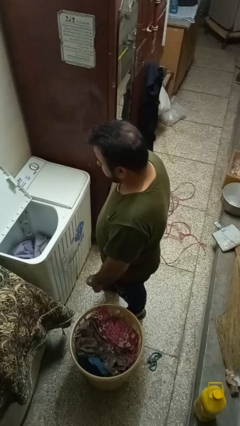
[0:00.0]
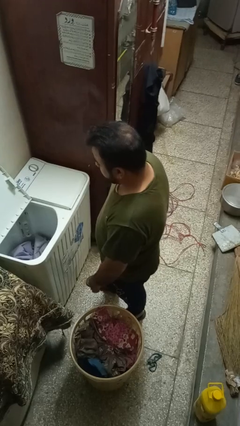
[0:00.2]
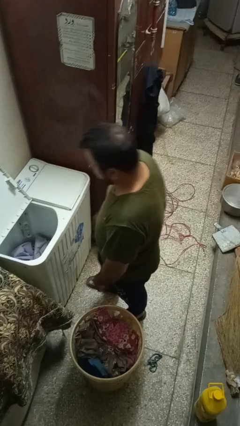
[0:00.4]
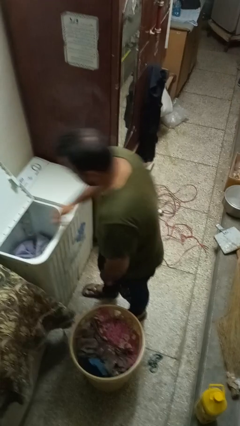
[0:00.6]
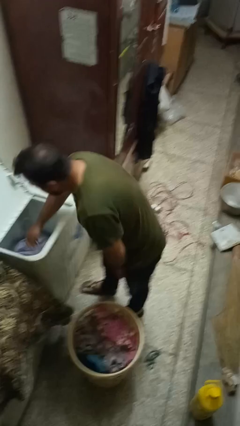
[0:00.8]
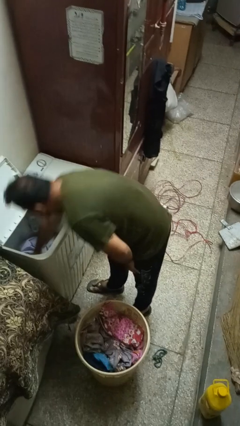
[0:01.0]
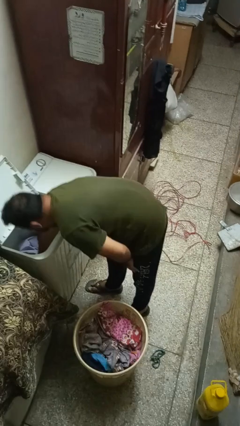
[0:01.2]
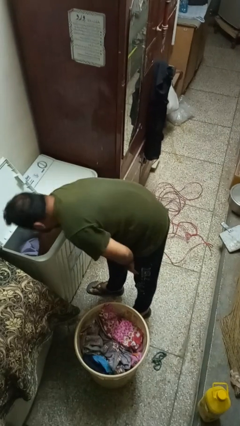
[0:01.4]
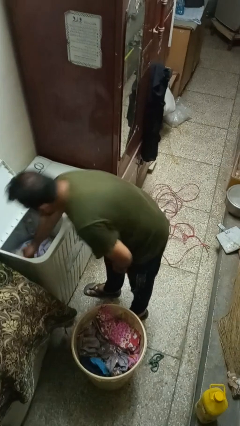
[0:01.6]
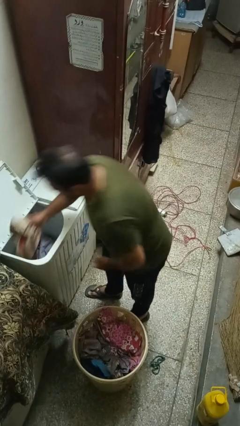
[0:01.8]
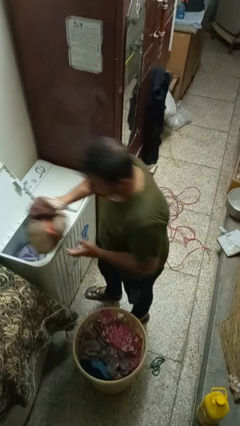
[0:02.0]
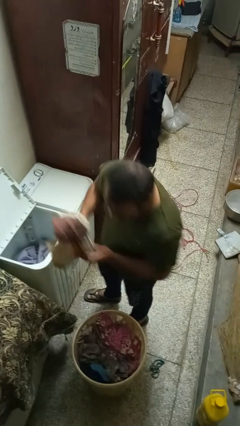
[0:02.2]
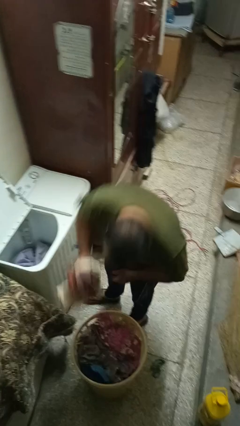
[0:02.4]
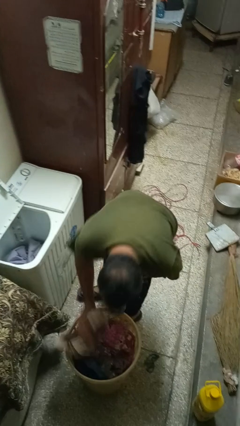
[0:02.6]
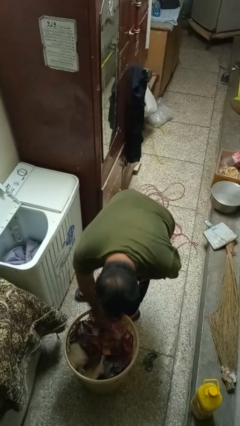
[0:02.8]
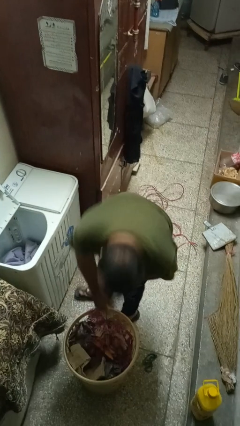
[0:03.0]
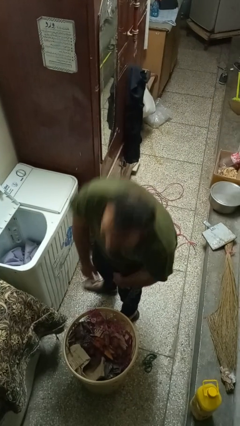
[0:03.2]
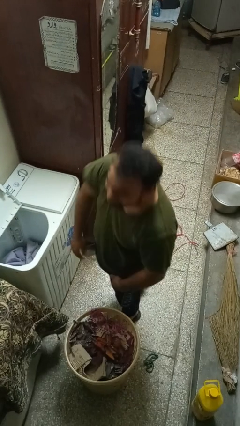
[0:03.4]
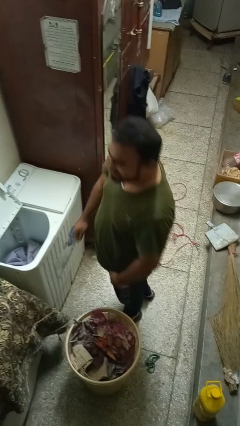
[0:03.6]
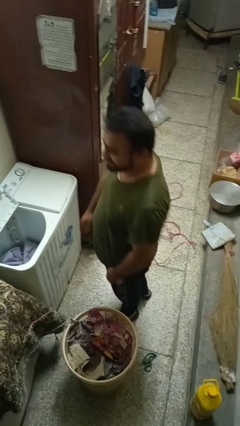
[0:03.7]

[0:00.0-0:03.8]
person unloads clotheswasher

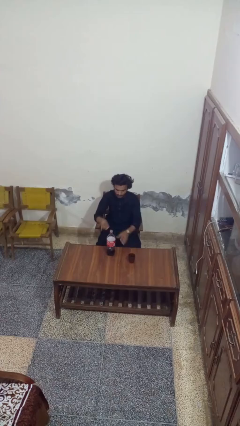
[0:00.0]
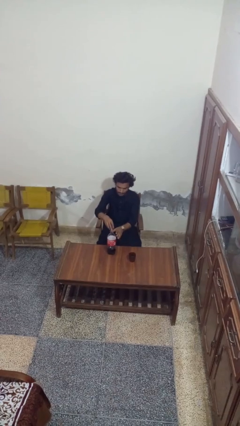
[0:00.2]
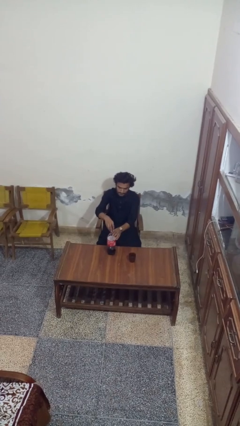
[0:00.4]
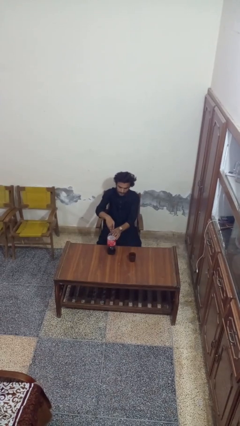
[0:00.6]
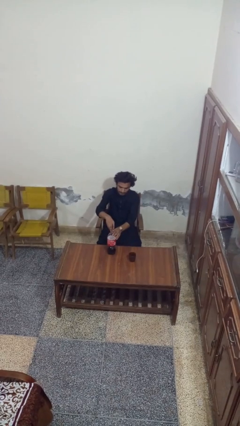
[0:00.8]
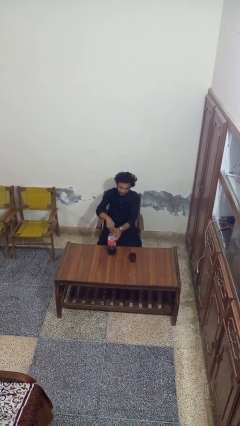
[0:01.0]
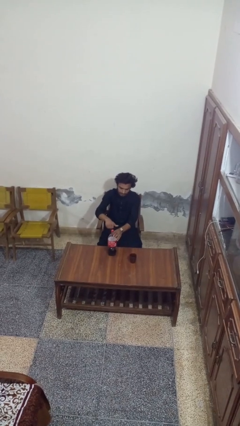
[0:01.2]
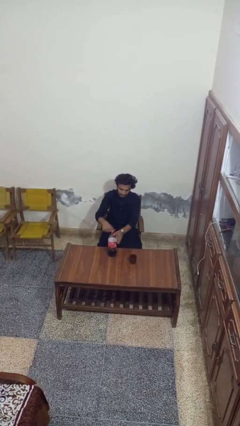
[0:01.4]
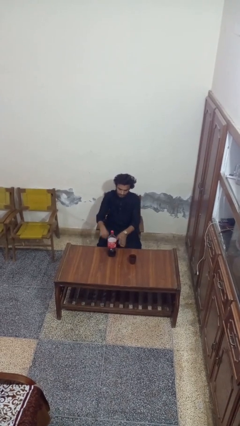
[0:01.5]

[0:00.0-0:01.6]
person screws lid to bottle

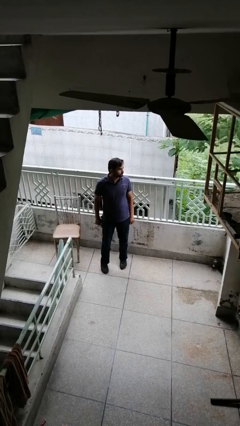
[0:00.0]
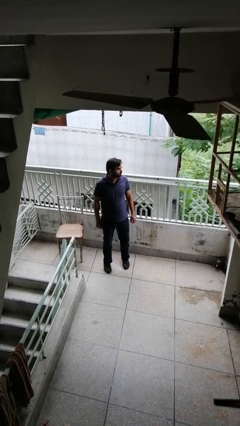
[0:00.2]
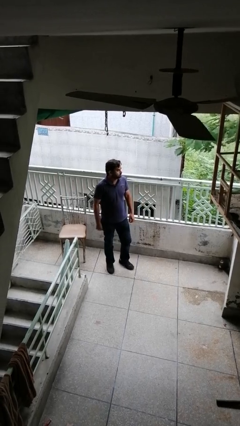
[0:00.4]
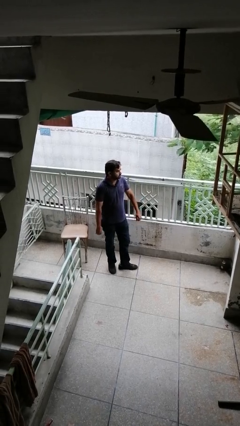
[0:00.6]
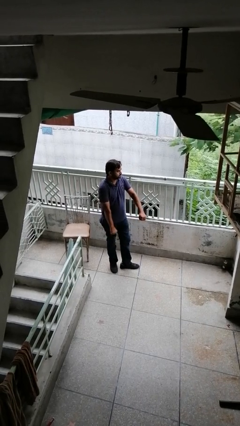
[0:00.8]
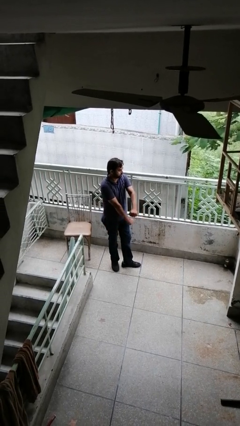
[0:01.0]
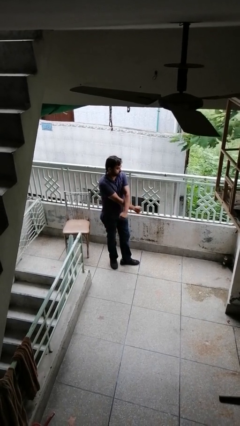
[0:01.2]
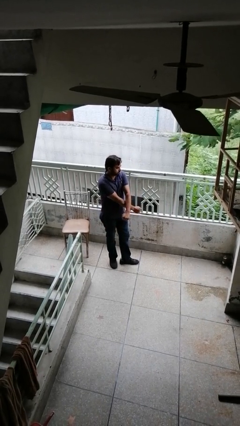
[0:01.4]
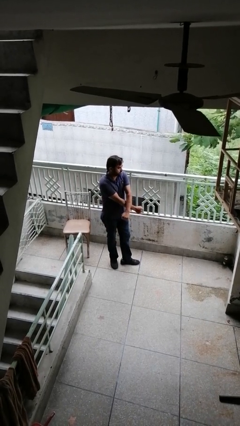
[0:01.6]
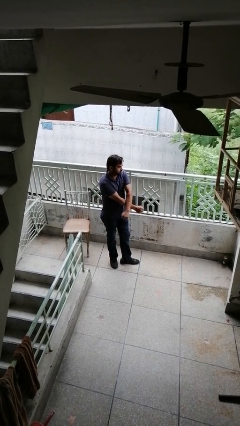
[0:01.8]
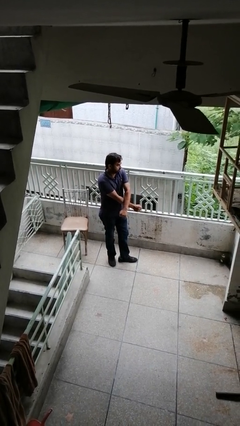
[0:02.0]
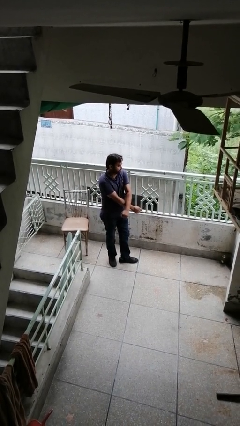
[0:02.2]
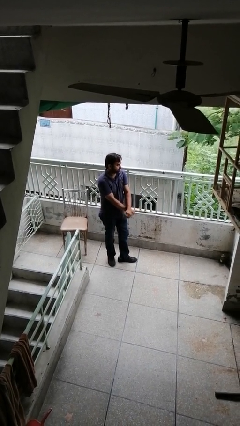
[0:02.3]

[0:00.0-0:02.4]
person gestures arms x

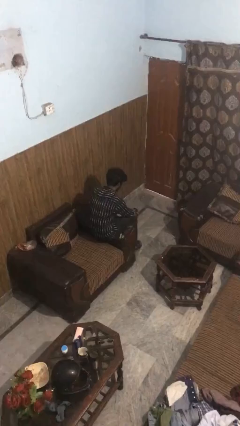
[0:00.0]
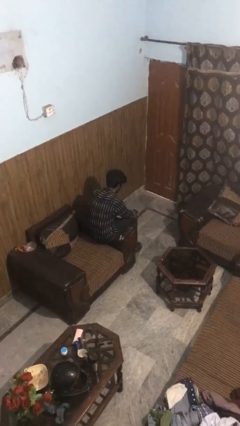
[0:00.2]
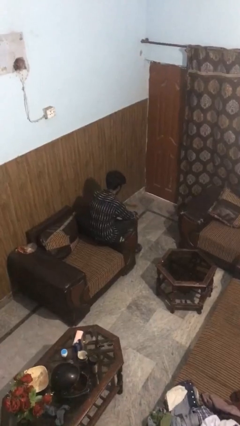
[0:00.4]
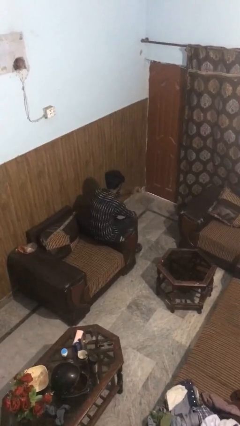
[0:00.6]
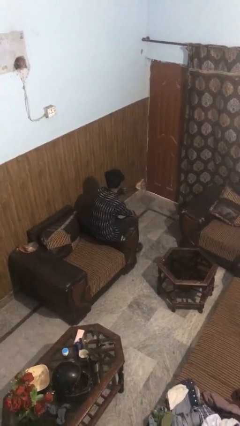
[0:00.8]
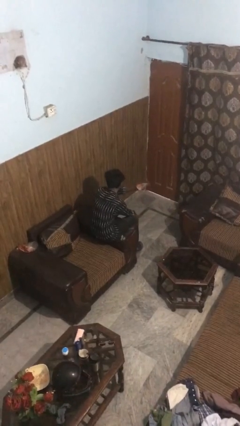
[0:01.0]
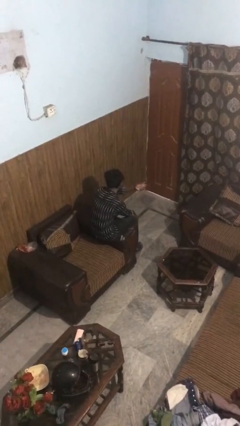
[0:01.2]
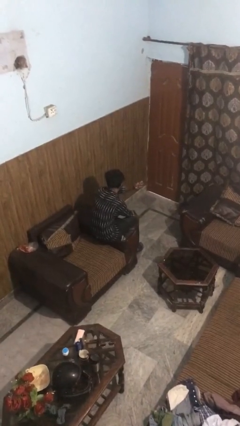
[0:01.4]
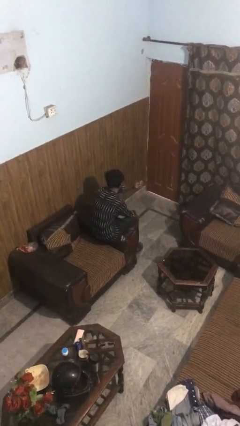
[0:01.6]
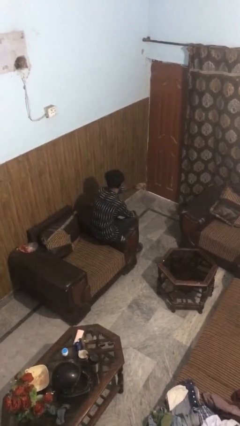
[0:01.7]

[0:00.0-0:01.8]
person snaps fingers

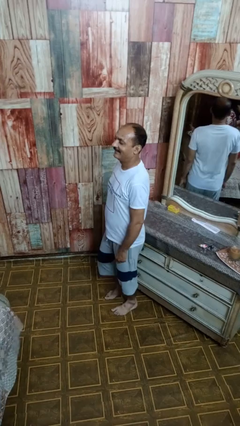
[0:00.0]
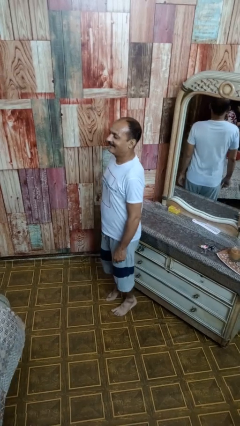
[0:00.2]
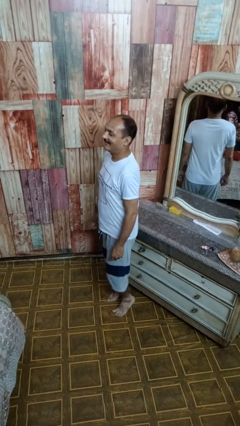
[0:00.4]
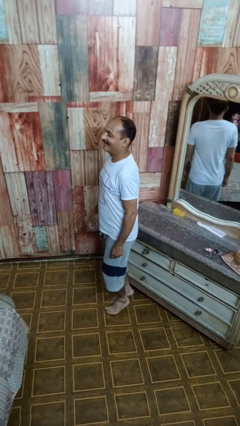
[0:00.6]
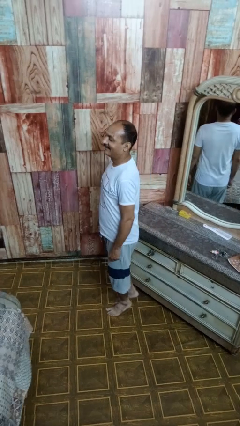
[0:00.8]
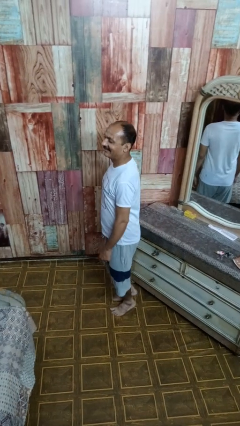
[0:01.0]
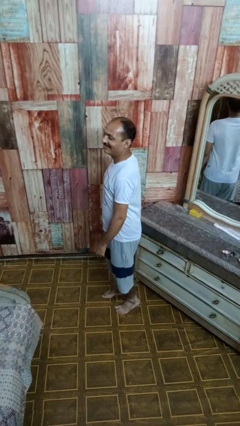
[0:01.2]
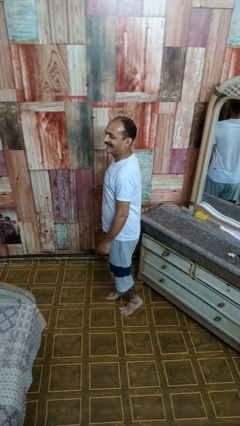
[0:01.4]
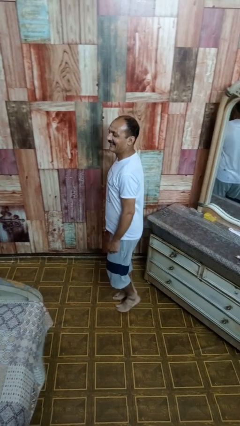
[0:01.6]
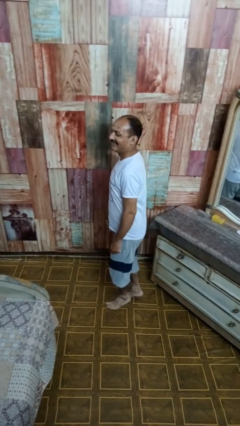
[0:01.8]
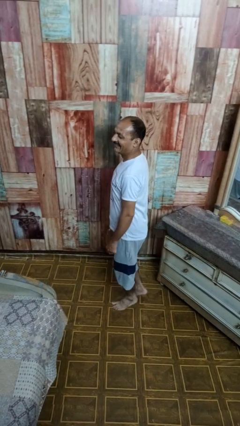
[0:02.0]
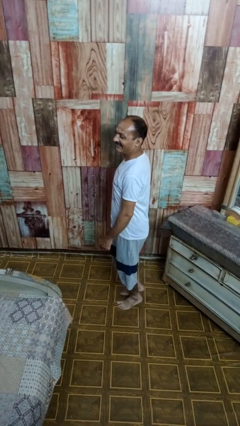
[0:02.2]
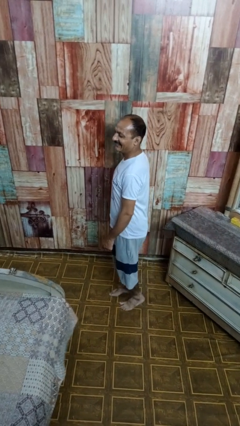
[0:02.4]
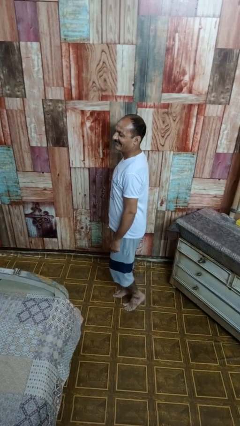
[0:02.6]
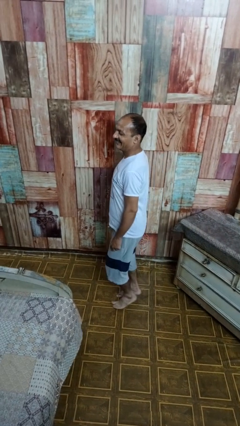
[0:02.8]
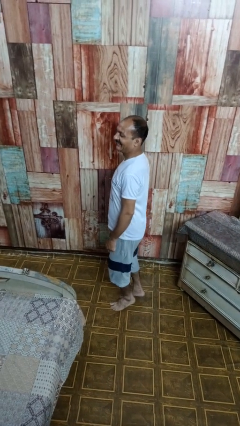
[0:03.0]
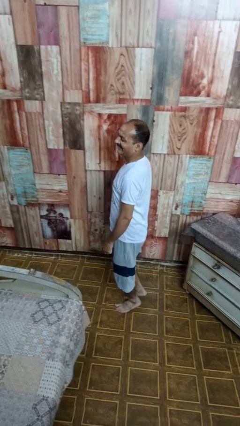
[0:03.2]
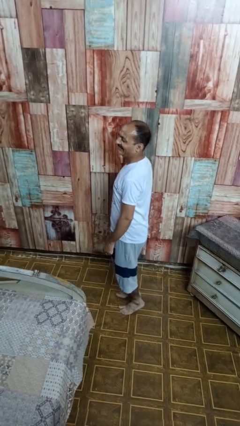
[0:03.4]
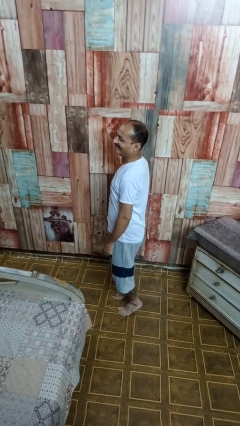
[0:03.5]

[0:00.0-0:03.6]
person walks tiptoe

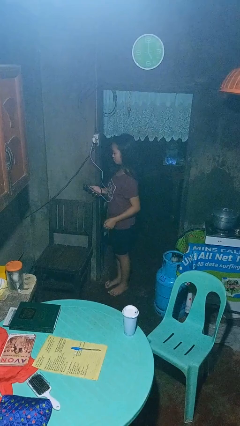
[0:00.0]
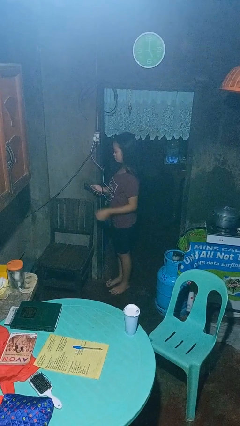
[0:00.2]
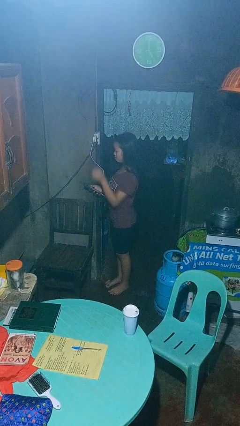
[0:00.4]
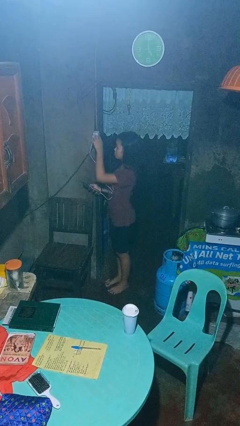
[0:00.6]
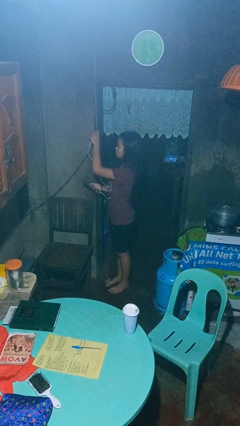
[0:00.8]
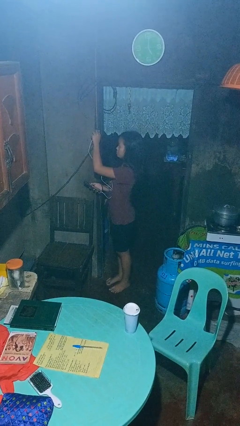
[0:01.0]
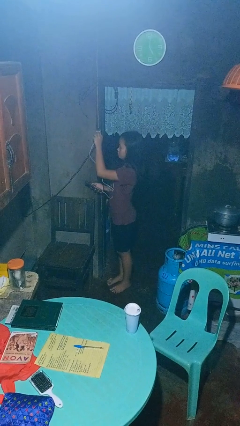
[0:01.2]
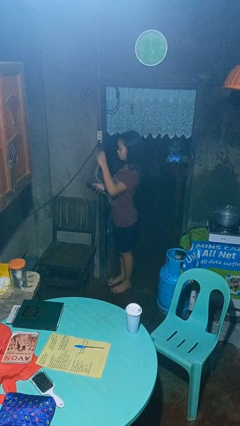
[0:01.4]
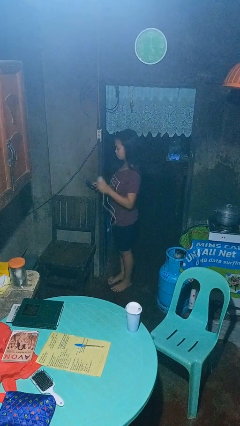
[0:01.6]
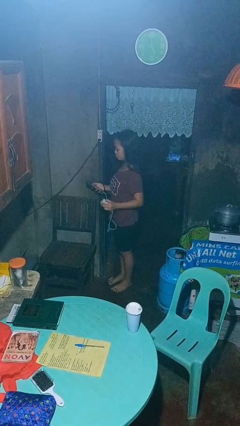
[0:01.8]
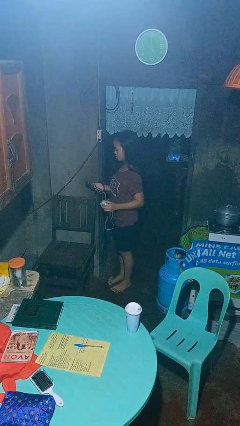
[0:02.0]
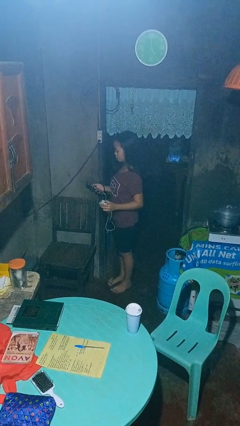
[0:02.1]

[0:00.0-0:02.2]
person unplugs from electrical socket

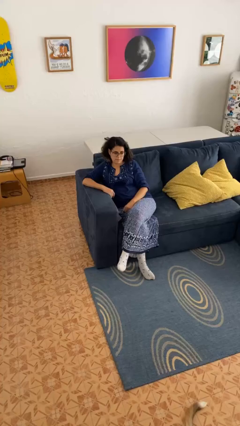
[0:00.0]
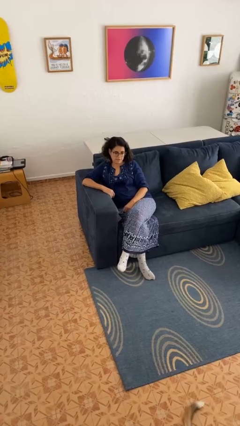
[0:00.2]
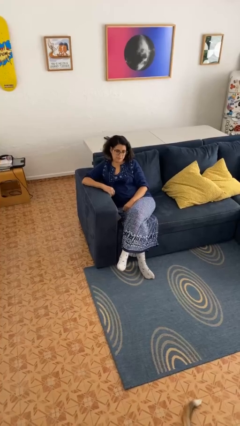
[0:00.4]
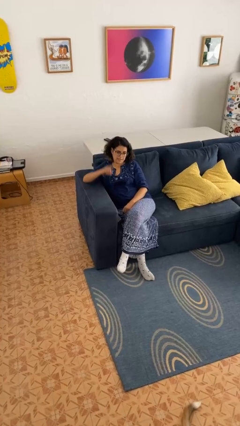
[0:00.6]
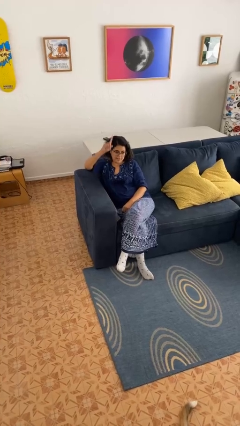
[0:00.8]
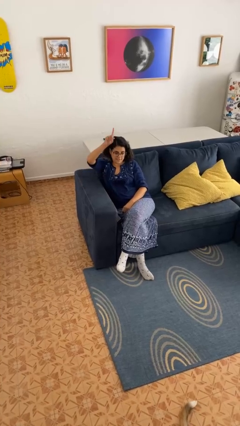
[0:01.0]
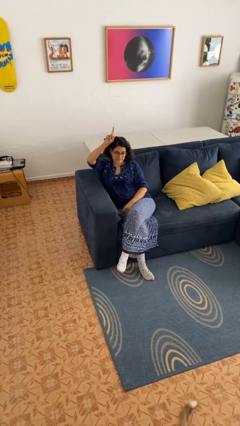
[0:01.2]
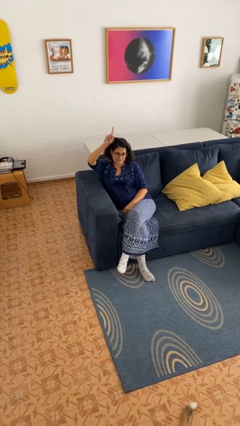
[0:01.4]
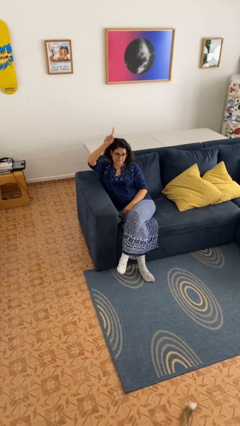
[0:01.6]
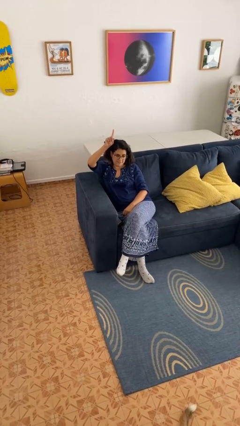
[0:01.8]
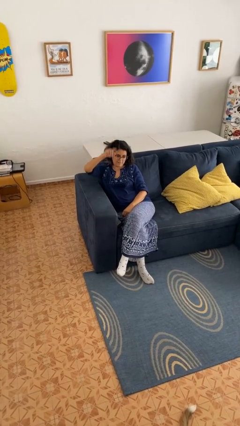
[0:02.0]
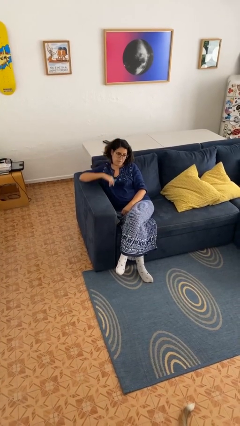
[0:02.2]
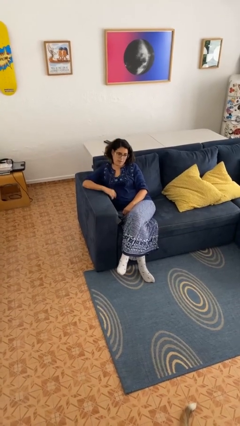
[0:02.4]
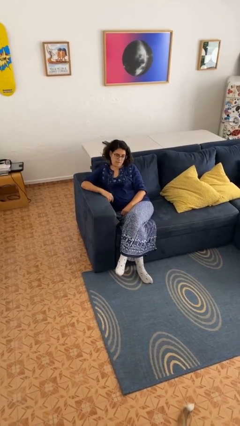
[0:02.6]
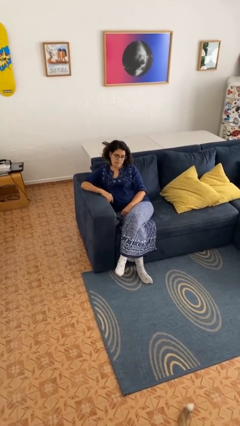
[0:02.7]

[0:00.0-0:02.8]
person gestures number one
